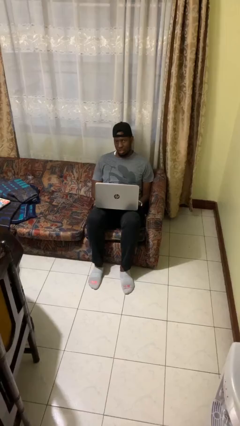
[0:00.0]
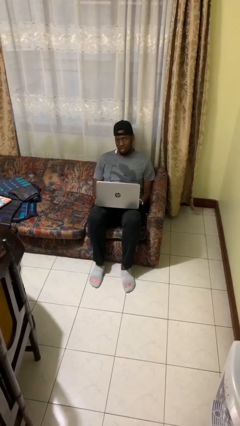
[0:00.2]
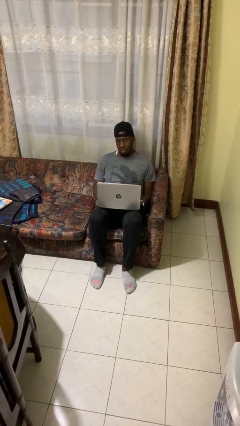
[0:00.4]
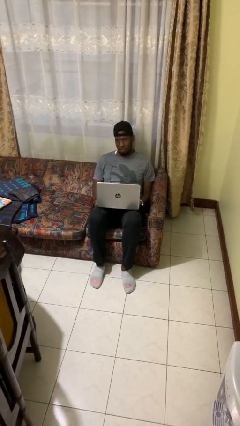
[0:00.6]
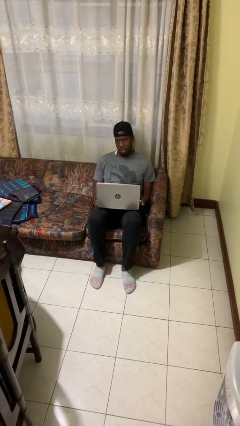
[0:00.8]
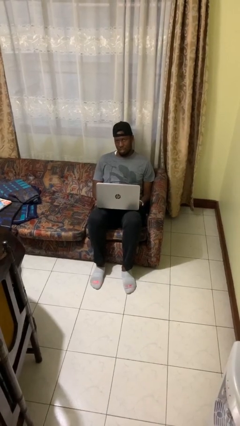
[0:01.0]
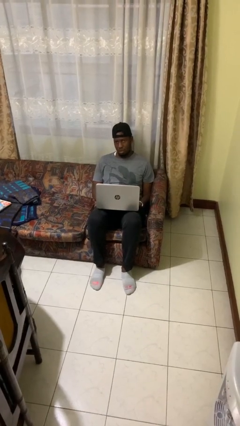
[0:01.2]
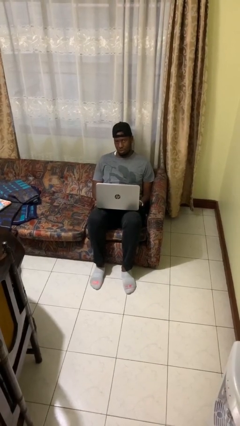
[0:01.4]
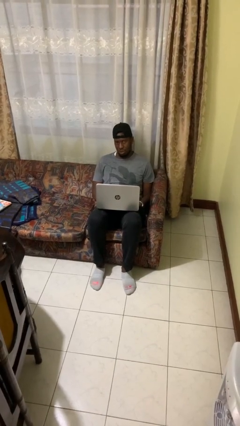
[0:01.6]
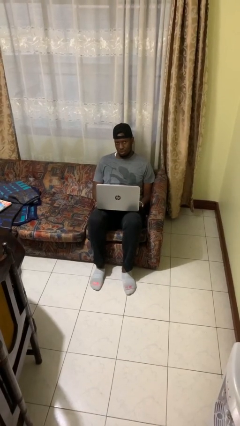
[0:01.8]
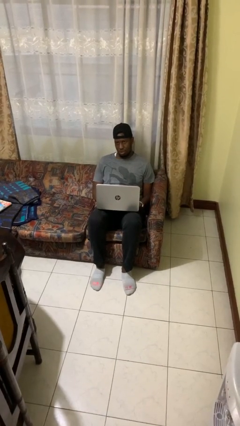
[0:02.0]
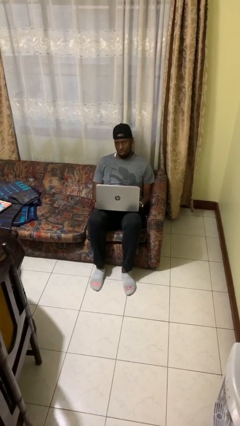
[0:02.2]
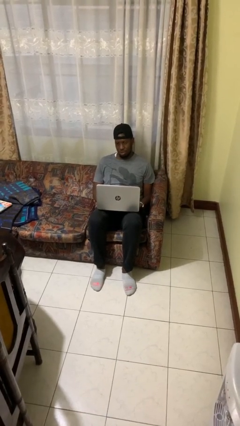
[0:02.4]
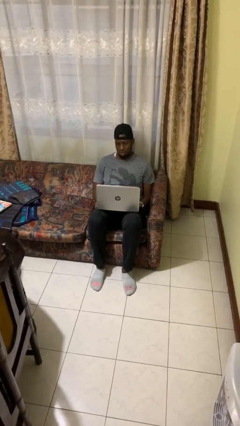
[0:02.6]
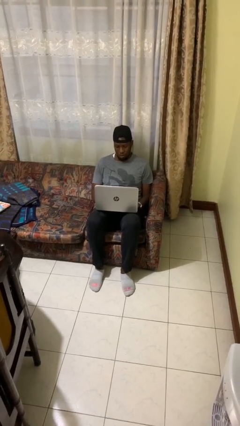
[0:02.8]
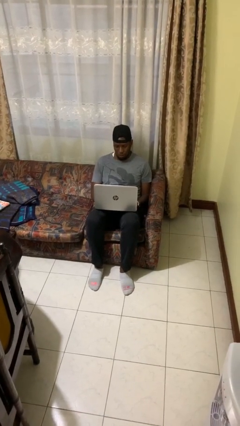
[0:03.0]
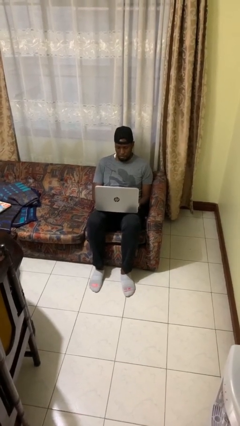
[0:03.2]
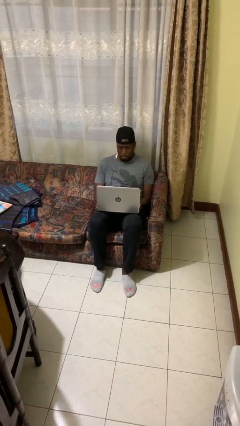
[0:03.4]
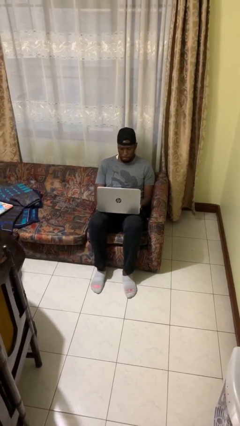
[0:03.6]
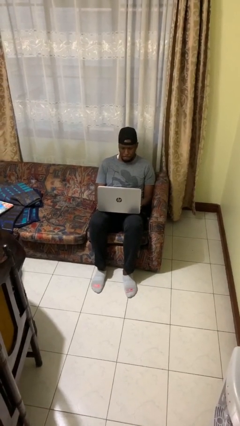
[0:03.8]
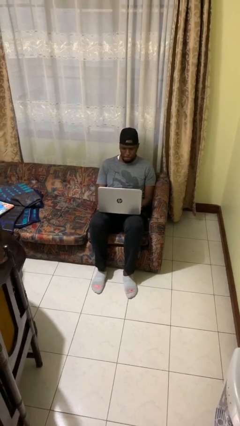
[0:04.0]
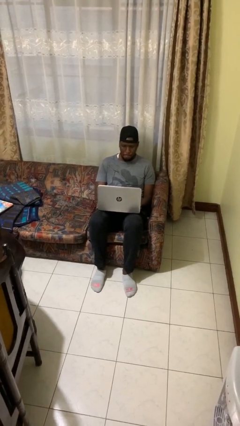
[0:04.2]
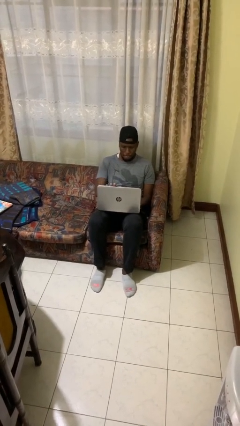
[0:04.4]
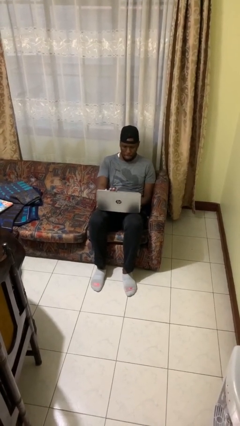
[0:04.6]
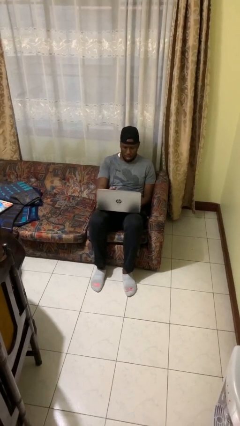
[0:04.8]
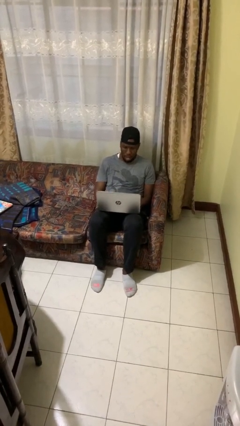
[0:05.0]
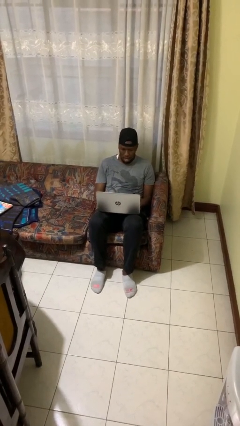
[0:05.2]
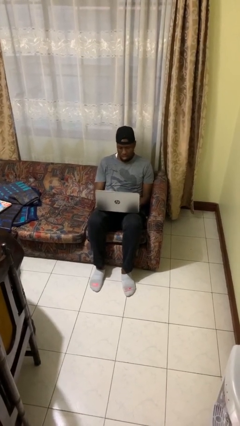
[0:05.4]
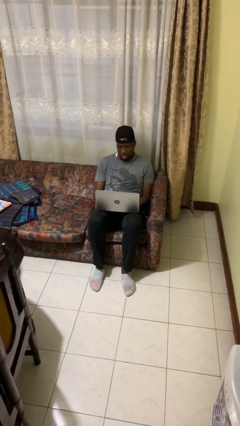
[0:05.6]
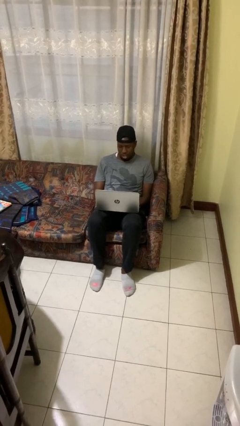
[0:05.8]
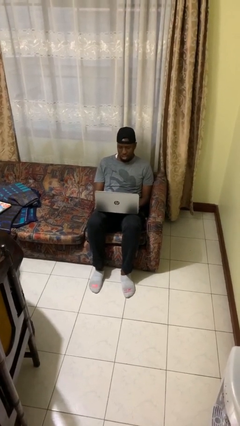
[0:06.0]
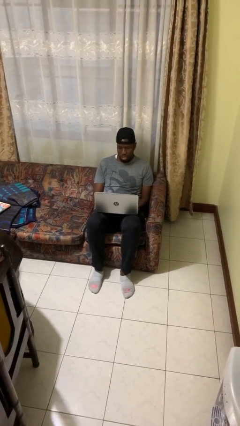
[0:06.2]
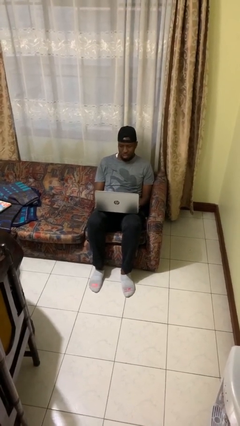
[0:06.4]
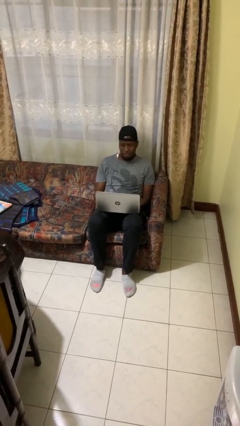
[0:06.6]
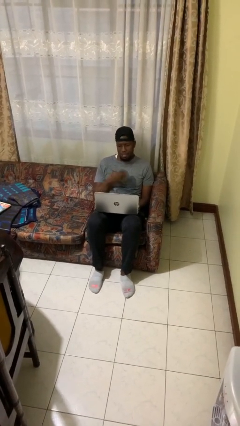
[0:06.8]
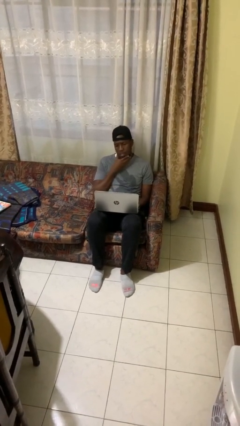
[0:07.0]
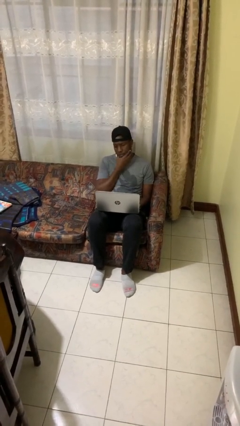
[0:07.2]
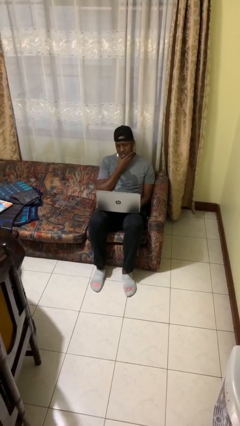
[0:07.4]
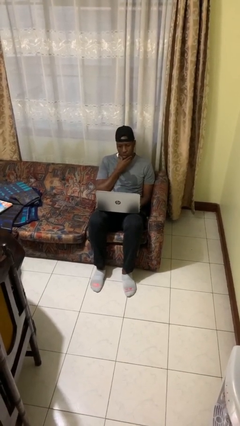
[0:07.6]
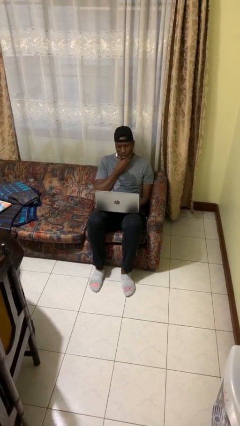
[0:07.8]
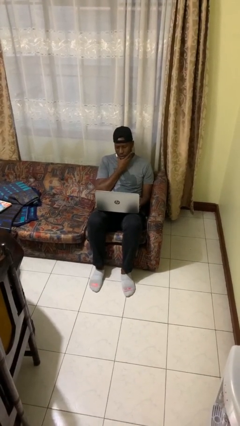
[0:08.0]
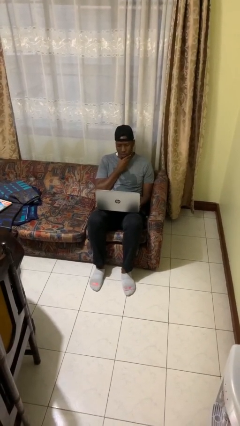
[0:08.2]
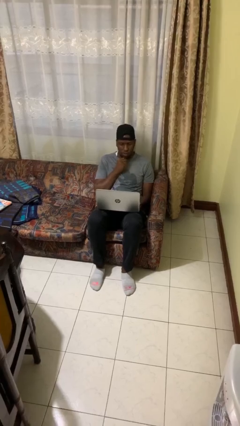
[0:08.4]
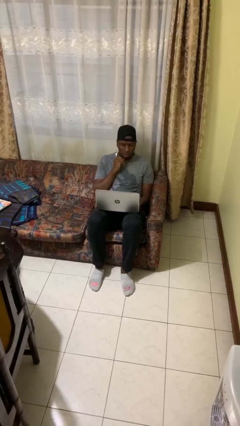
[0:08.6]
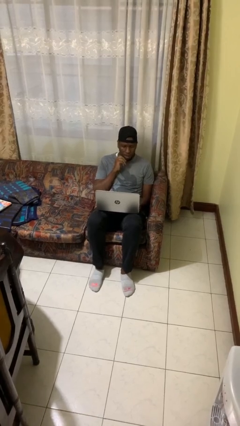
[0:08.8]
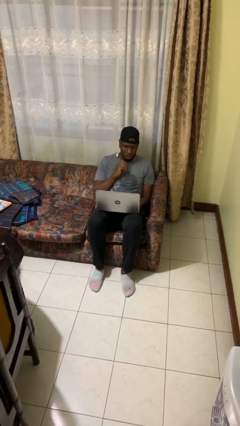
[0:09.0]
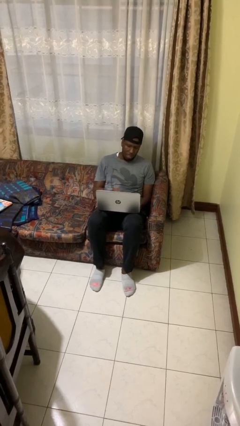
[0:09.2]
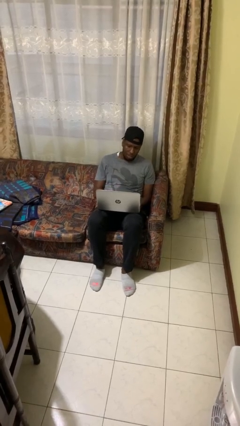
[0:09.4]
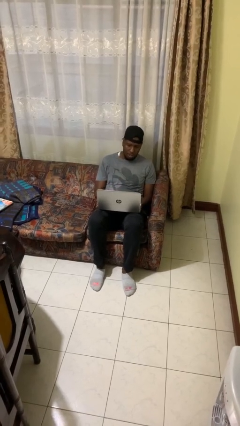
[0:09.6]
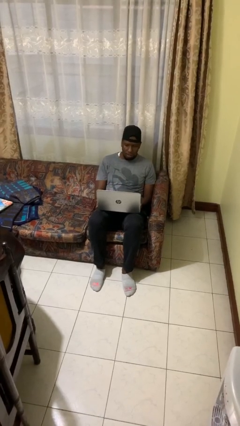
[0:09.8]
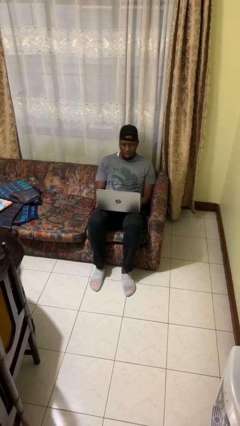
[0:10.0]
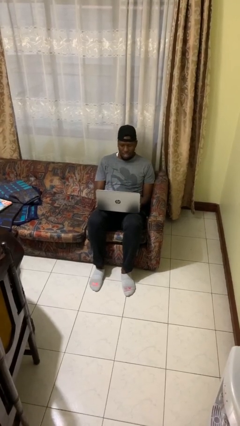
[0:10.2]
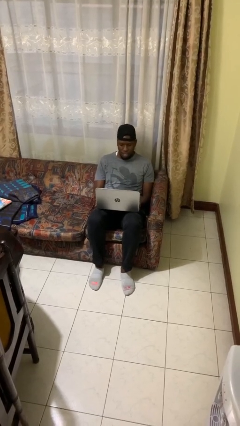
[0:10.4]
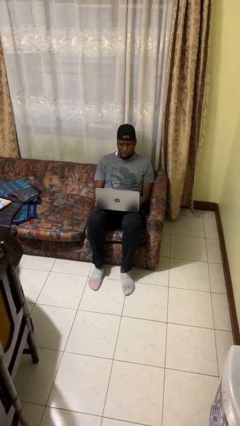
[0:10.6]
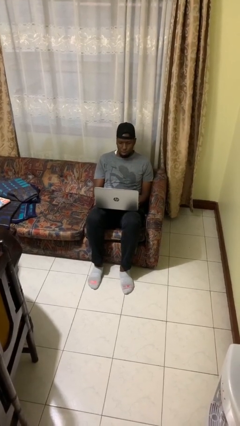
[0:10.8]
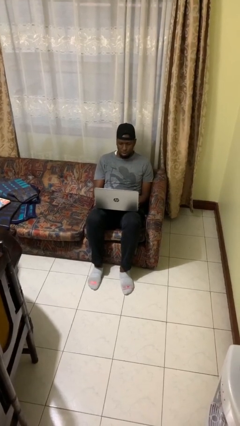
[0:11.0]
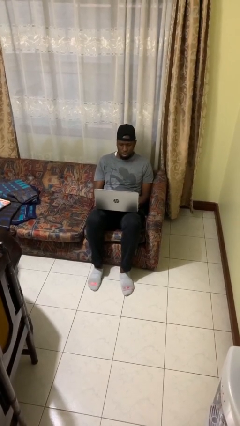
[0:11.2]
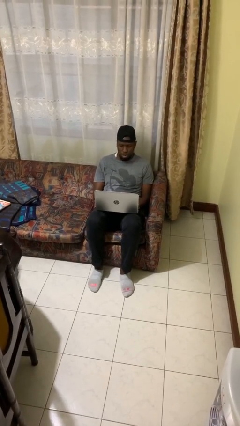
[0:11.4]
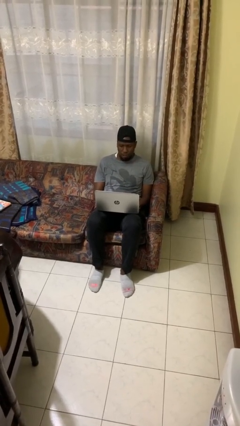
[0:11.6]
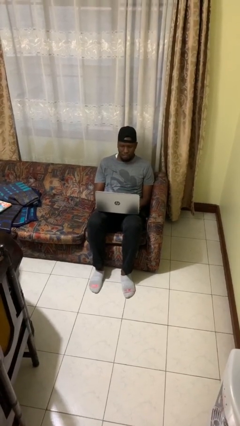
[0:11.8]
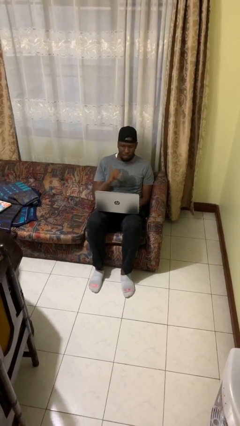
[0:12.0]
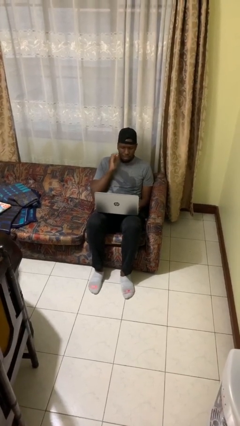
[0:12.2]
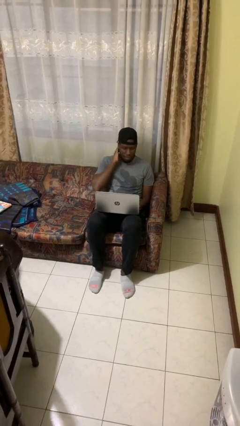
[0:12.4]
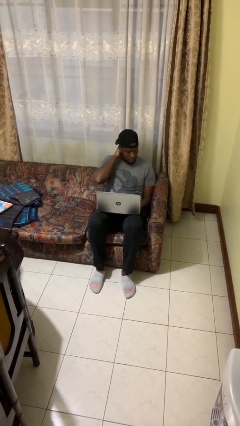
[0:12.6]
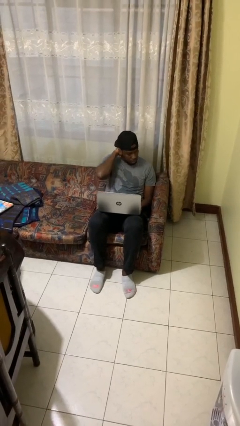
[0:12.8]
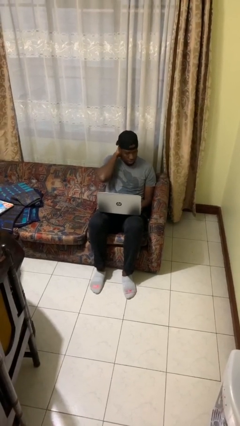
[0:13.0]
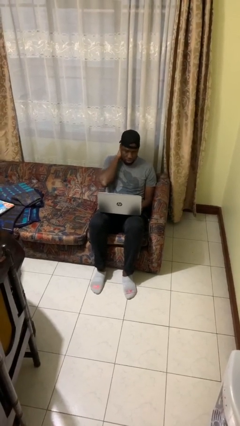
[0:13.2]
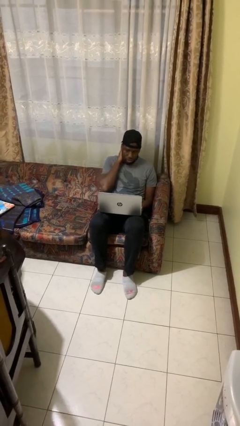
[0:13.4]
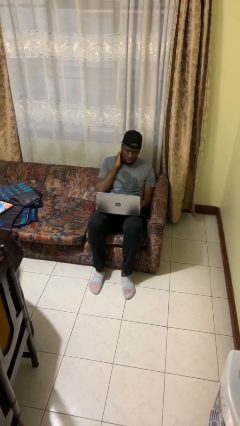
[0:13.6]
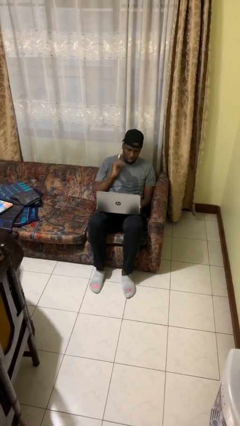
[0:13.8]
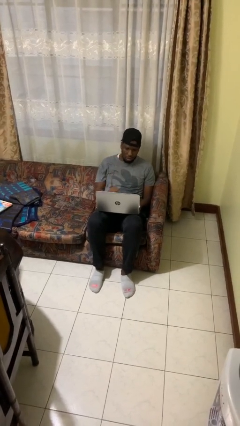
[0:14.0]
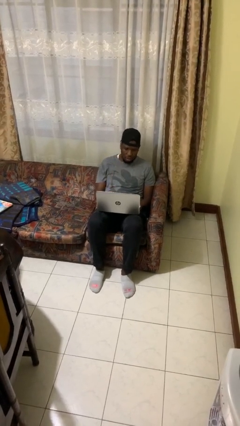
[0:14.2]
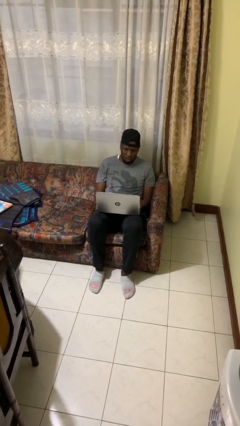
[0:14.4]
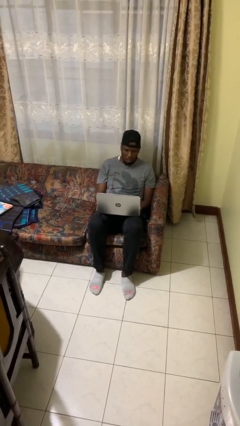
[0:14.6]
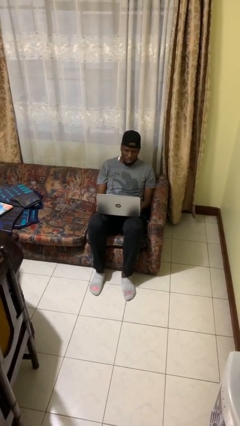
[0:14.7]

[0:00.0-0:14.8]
person interacts with laptop

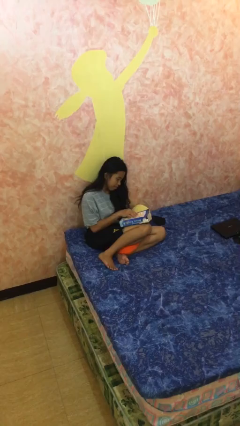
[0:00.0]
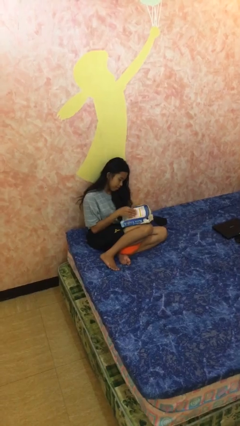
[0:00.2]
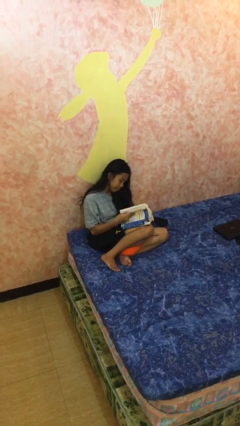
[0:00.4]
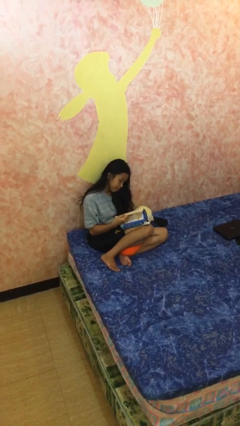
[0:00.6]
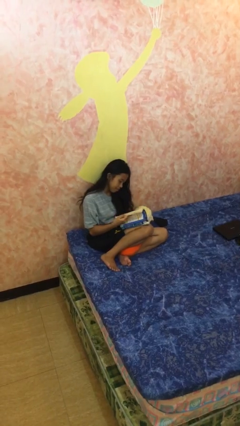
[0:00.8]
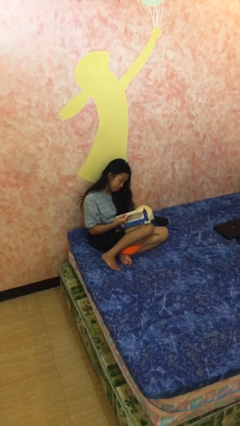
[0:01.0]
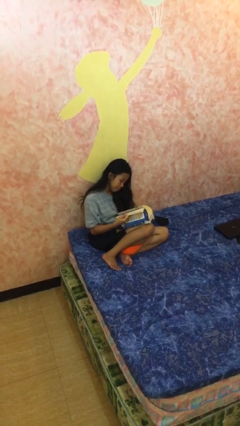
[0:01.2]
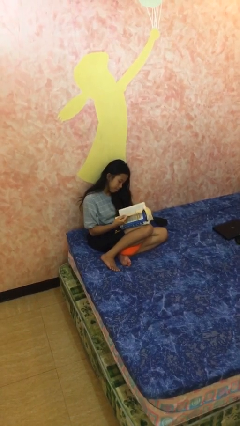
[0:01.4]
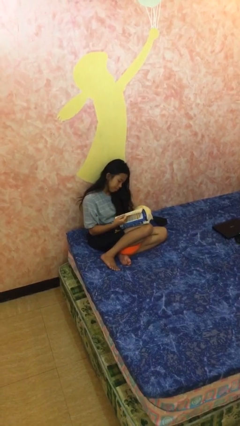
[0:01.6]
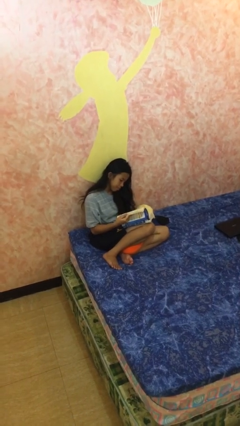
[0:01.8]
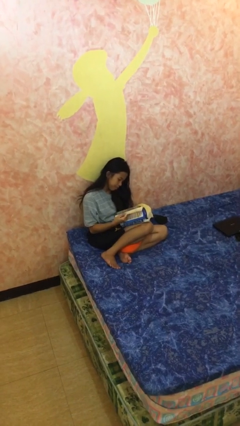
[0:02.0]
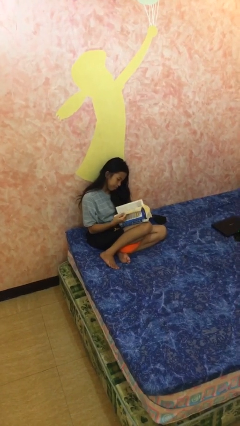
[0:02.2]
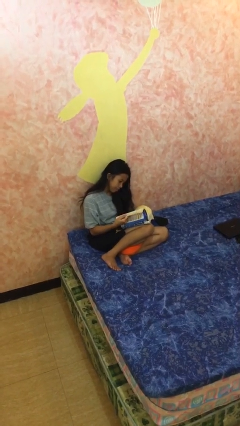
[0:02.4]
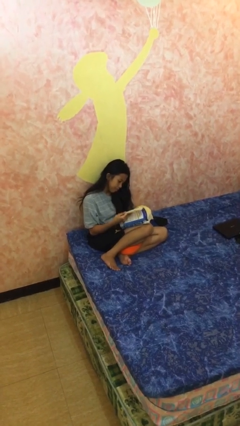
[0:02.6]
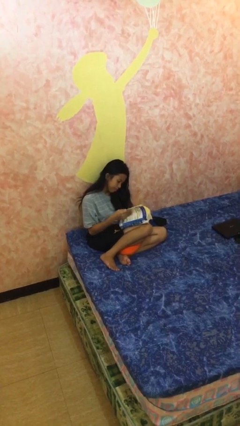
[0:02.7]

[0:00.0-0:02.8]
person reads document

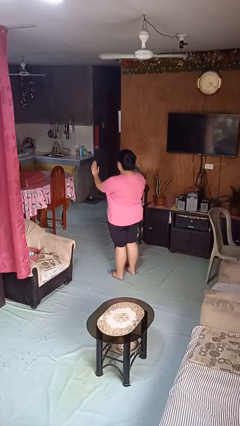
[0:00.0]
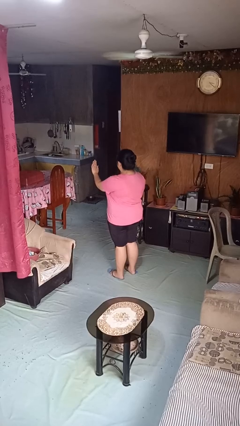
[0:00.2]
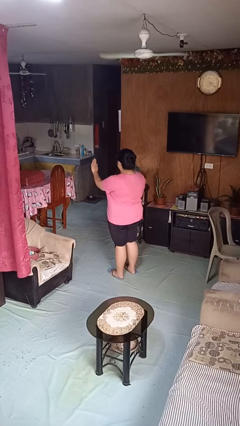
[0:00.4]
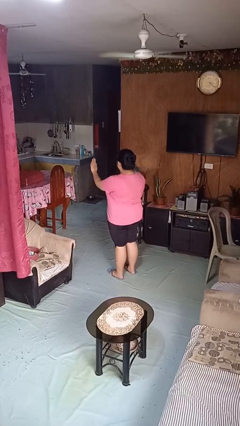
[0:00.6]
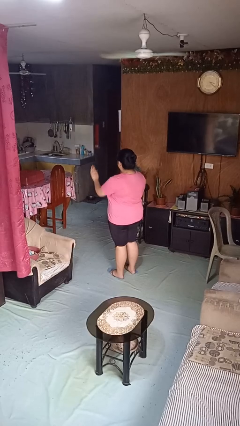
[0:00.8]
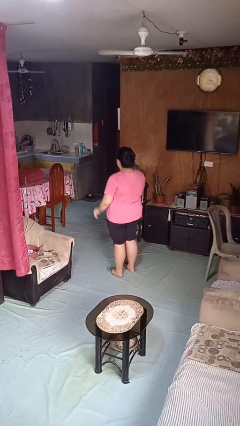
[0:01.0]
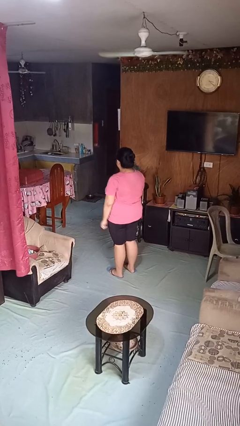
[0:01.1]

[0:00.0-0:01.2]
person gestures stop
